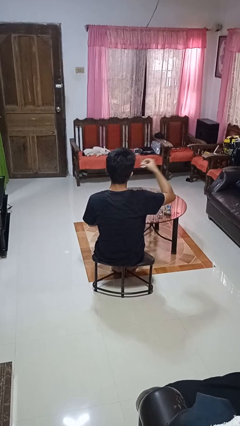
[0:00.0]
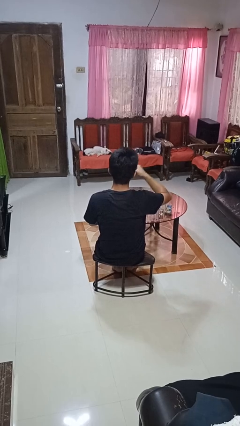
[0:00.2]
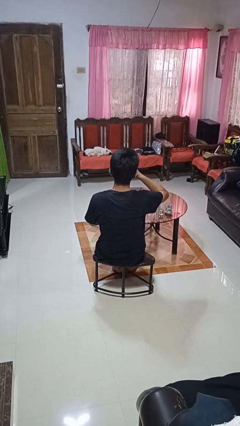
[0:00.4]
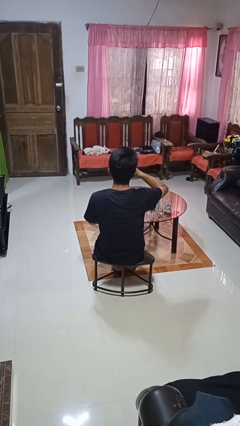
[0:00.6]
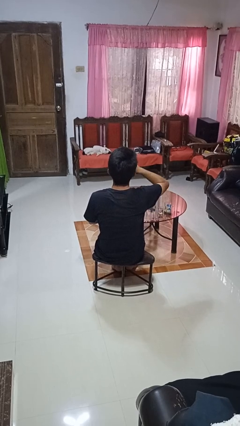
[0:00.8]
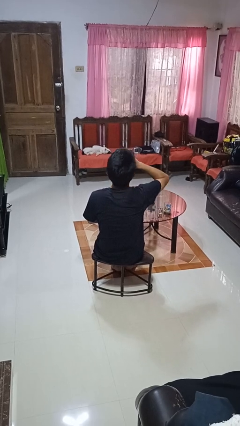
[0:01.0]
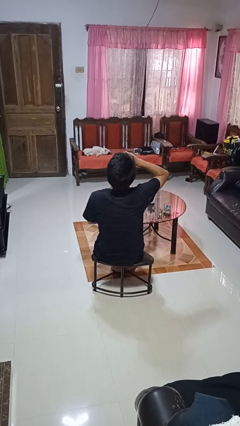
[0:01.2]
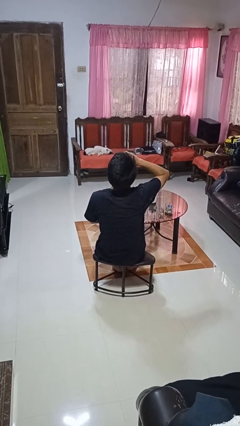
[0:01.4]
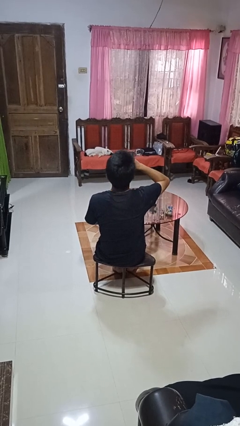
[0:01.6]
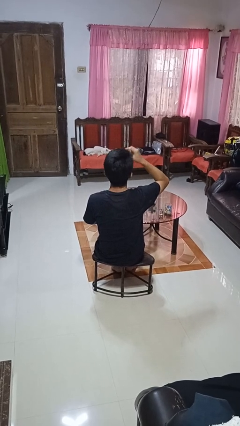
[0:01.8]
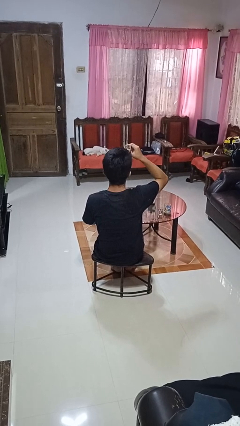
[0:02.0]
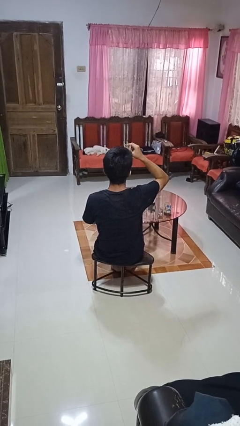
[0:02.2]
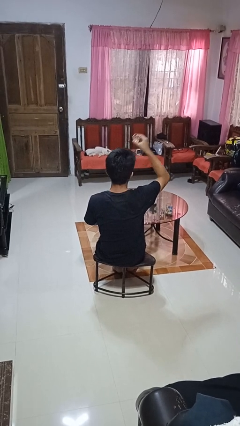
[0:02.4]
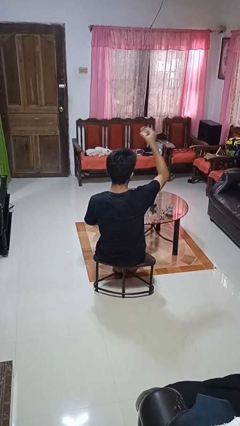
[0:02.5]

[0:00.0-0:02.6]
person drinks from shotglass

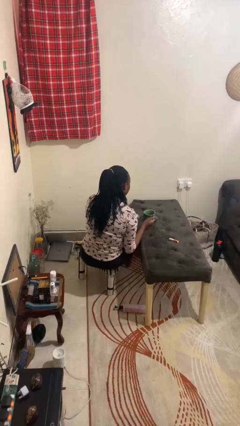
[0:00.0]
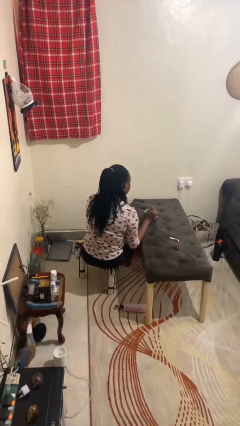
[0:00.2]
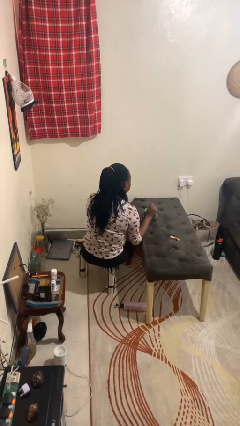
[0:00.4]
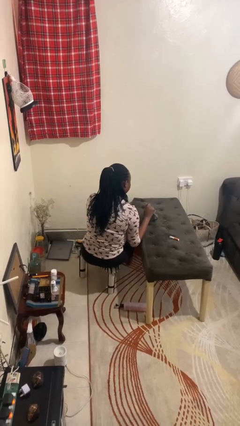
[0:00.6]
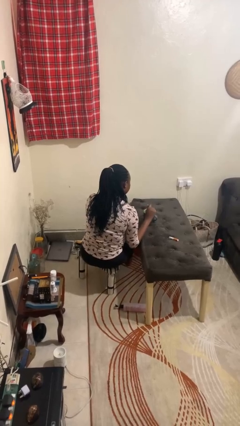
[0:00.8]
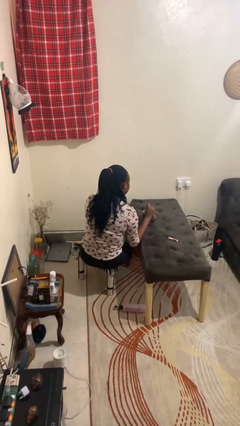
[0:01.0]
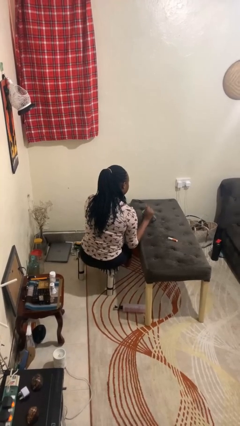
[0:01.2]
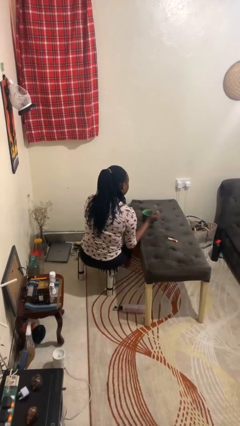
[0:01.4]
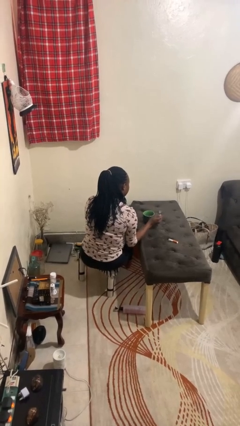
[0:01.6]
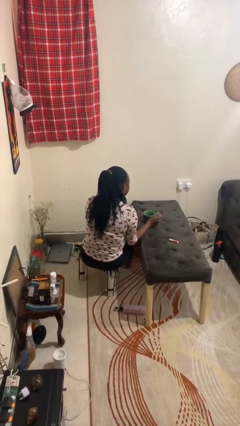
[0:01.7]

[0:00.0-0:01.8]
person stirs mug

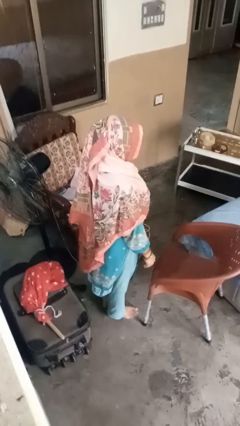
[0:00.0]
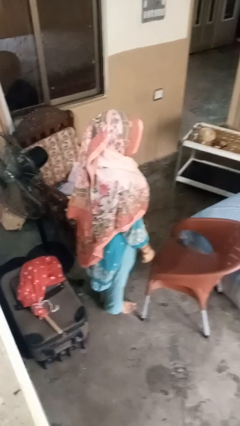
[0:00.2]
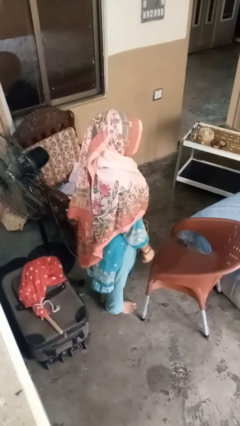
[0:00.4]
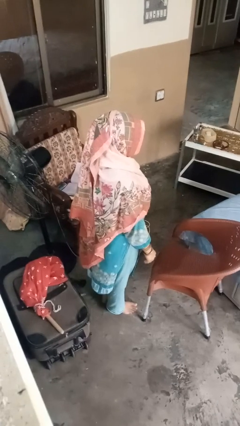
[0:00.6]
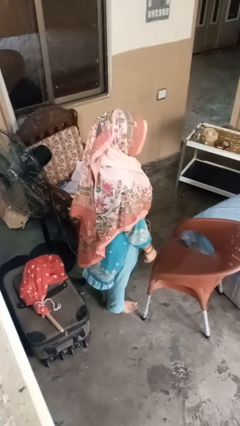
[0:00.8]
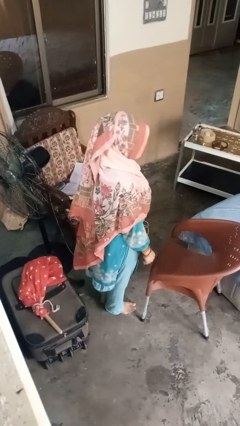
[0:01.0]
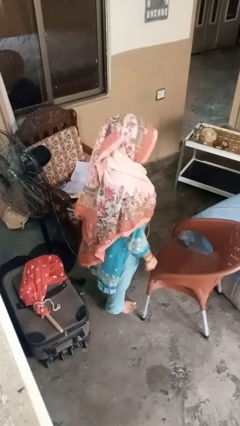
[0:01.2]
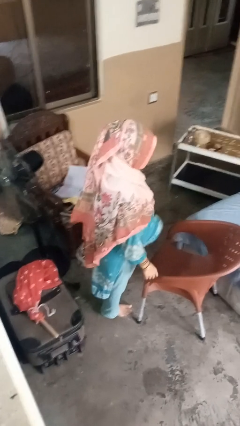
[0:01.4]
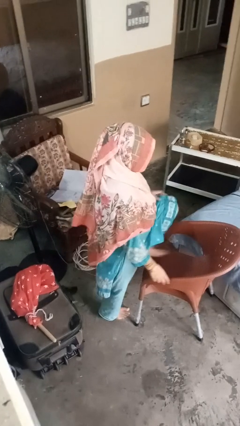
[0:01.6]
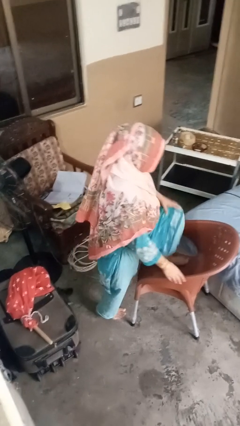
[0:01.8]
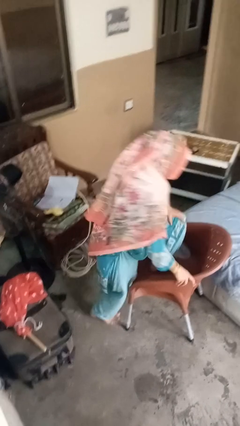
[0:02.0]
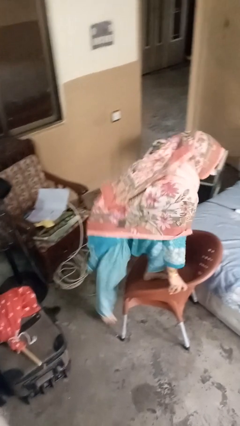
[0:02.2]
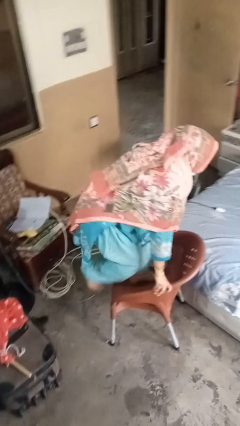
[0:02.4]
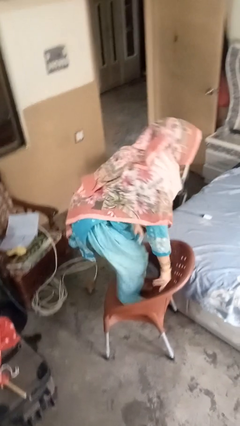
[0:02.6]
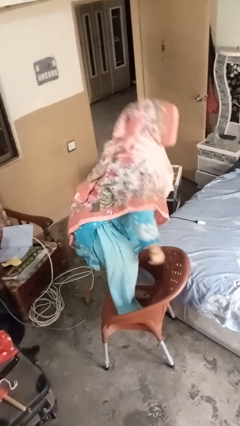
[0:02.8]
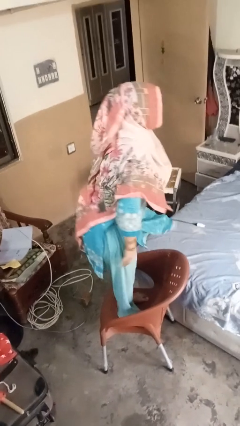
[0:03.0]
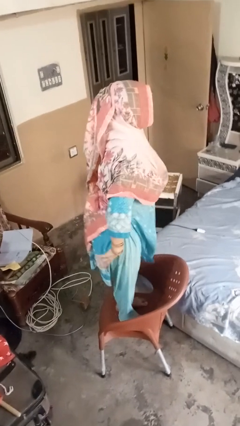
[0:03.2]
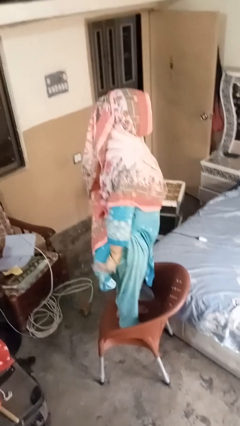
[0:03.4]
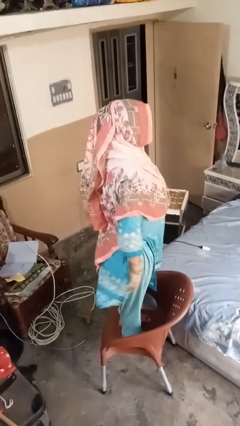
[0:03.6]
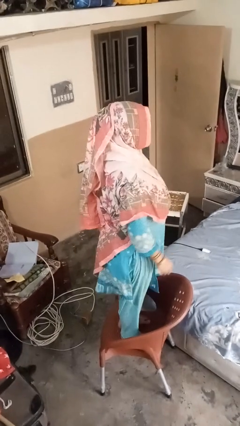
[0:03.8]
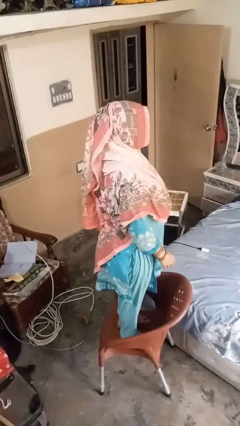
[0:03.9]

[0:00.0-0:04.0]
person climbs on chair

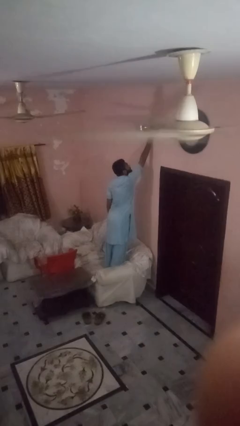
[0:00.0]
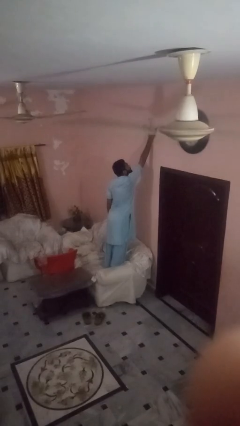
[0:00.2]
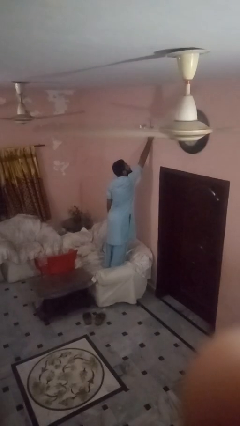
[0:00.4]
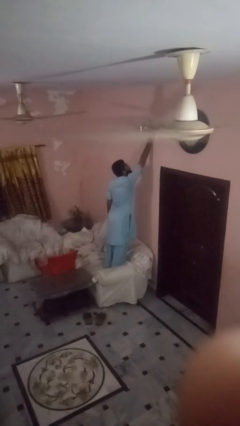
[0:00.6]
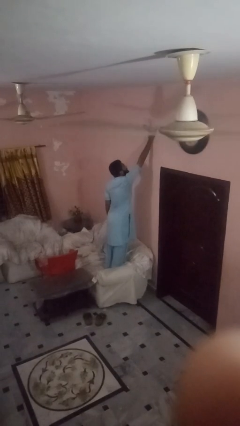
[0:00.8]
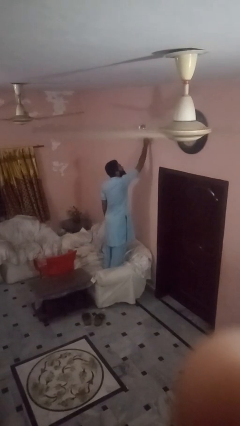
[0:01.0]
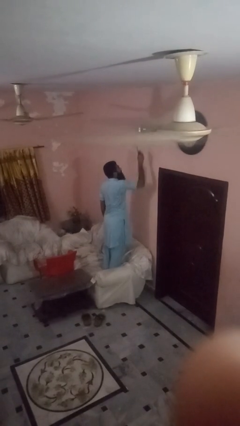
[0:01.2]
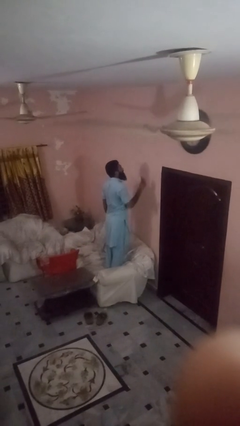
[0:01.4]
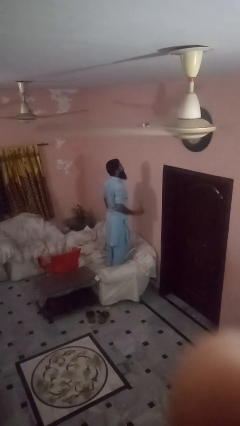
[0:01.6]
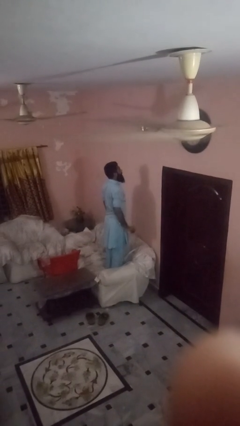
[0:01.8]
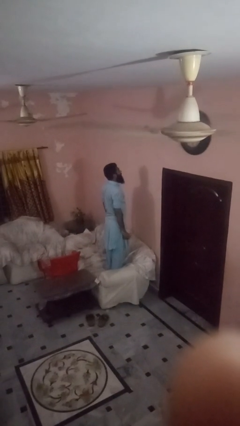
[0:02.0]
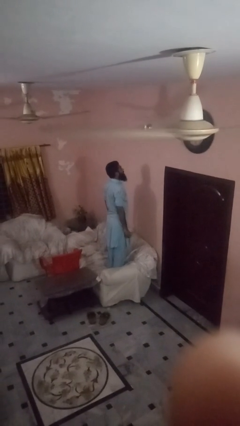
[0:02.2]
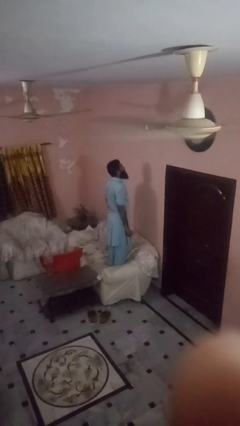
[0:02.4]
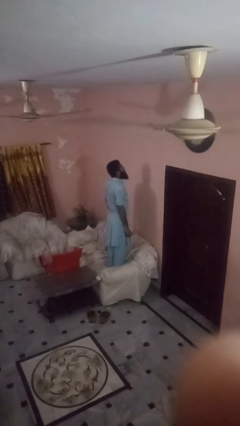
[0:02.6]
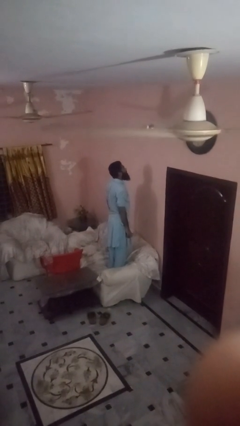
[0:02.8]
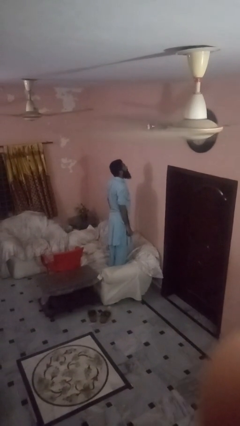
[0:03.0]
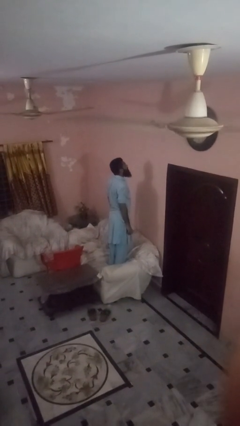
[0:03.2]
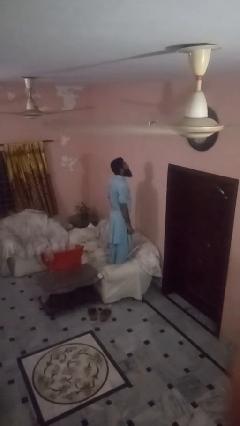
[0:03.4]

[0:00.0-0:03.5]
person takes down smoke detector

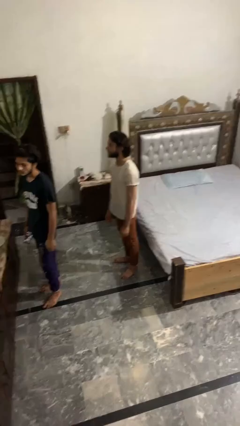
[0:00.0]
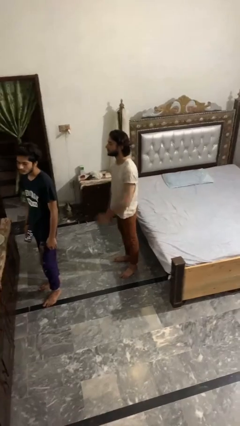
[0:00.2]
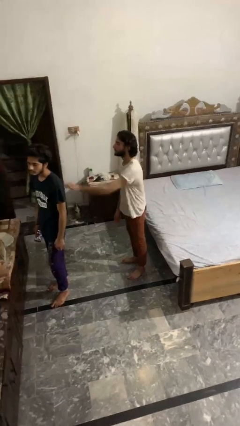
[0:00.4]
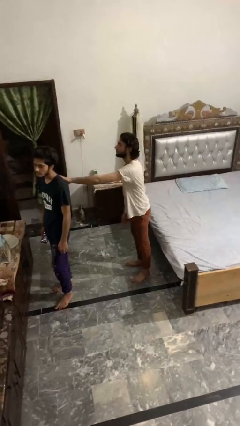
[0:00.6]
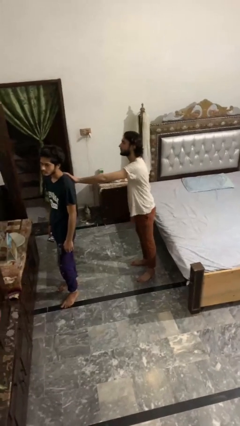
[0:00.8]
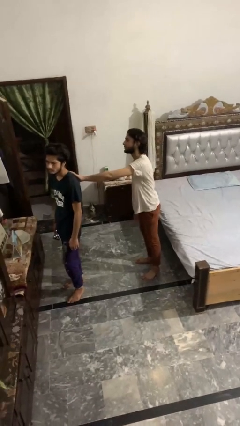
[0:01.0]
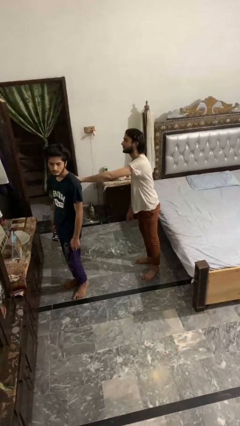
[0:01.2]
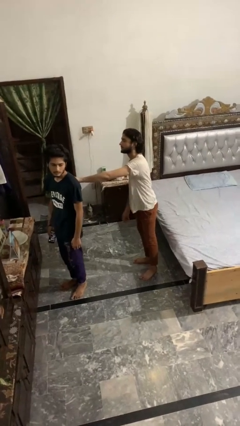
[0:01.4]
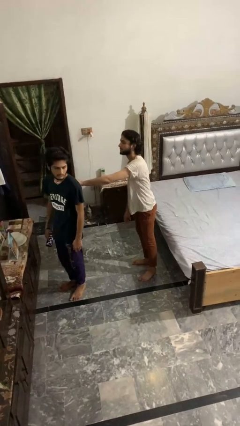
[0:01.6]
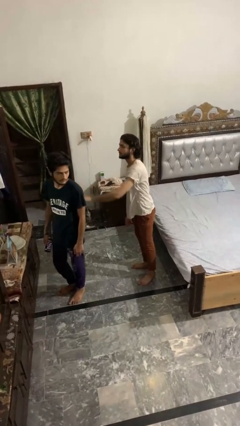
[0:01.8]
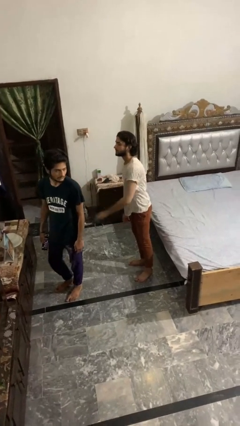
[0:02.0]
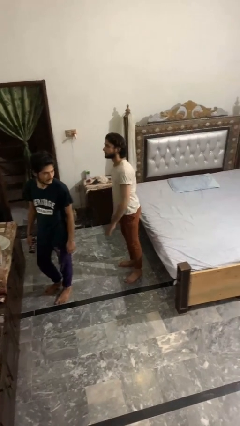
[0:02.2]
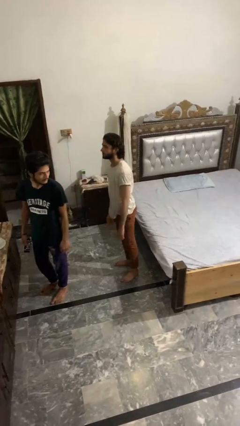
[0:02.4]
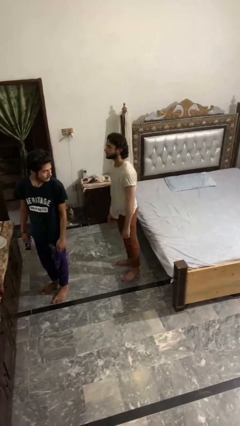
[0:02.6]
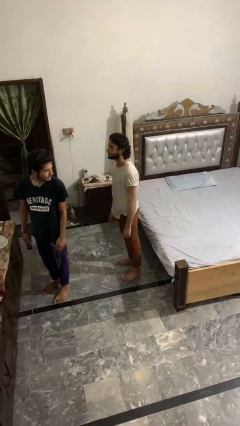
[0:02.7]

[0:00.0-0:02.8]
person touches back of person

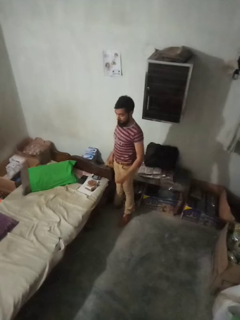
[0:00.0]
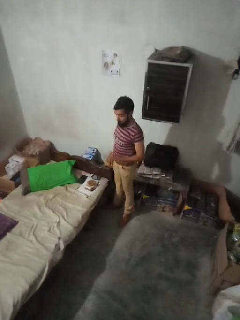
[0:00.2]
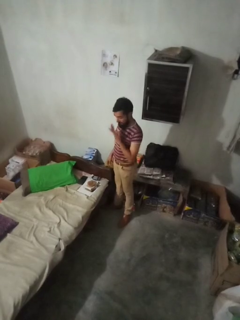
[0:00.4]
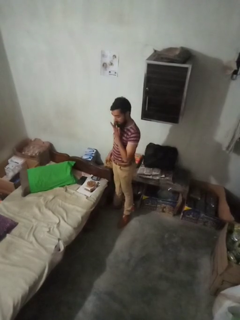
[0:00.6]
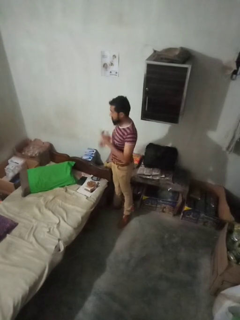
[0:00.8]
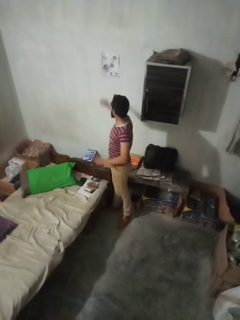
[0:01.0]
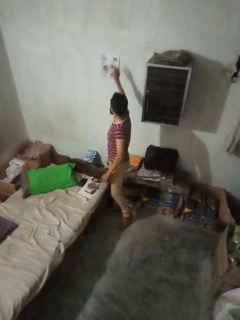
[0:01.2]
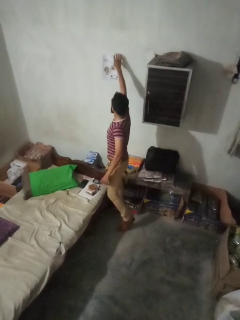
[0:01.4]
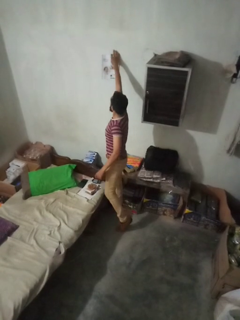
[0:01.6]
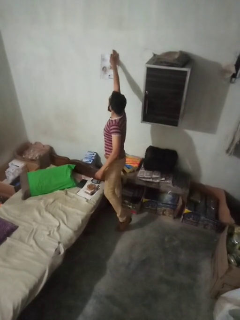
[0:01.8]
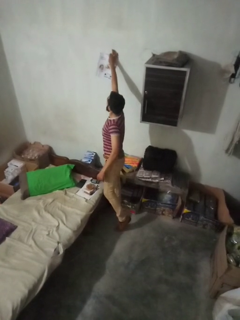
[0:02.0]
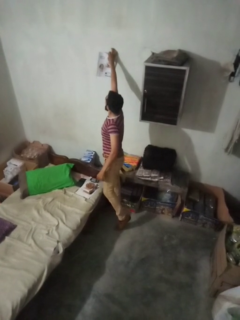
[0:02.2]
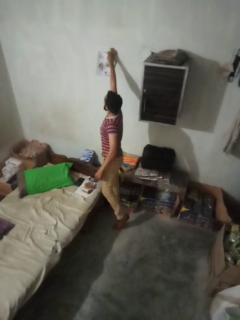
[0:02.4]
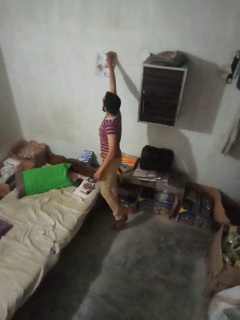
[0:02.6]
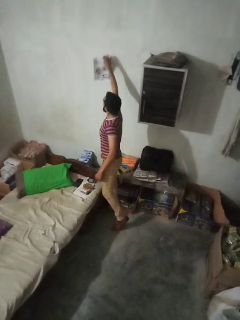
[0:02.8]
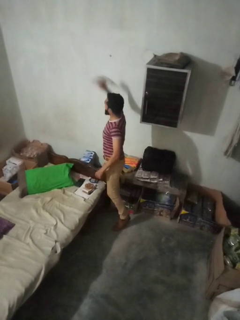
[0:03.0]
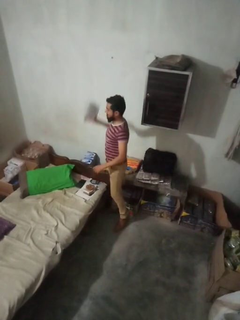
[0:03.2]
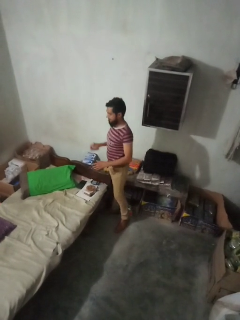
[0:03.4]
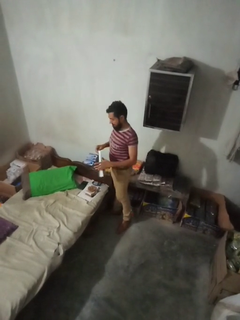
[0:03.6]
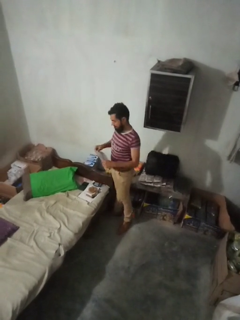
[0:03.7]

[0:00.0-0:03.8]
person takes down picture frame

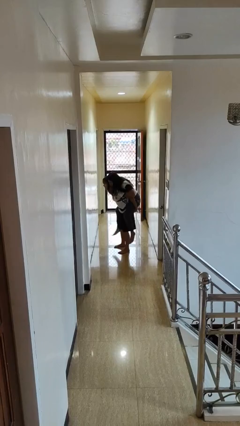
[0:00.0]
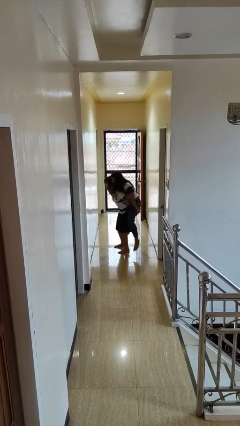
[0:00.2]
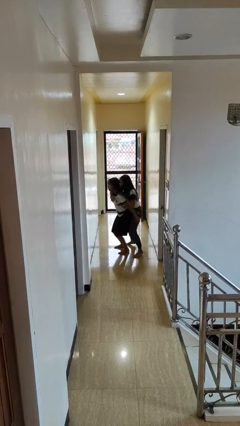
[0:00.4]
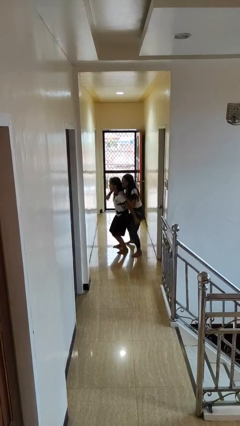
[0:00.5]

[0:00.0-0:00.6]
person puts down person
